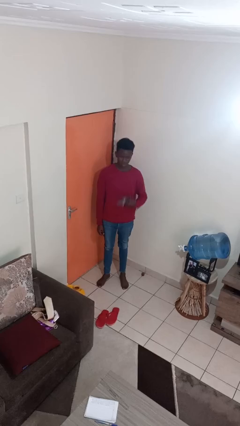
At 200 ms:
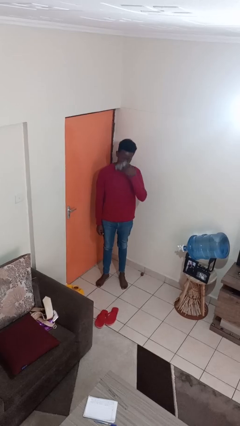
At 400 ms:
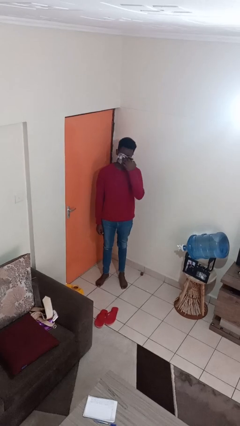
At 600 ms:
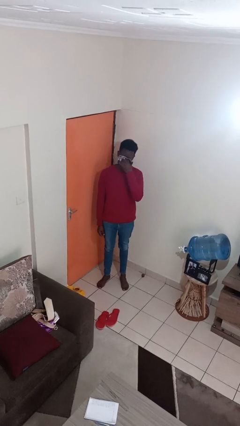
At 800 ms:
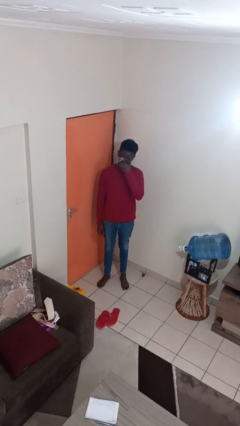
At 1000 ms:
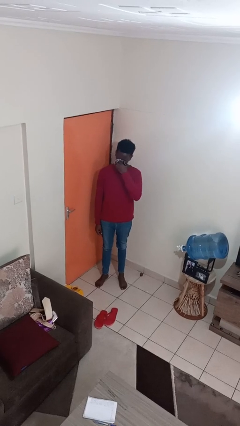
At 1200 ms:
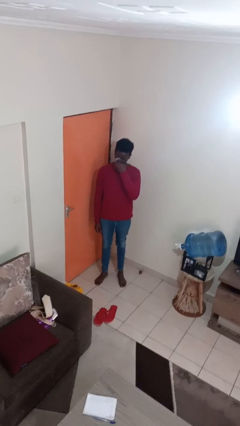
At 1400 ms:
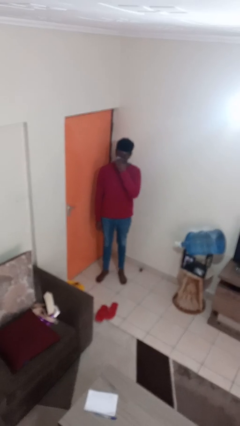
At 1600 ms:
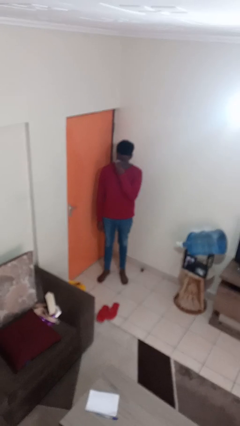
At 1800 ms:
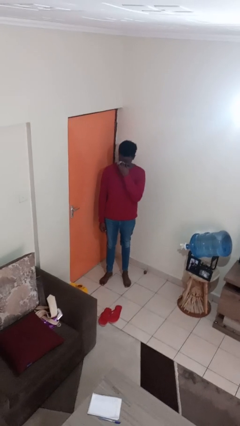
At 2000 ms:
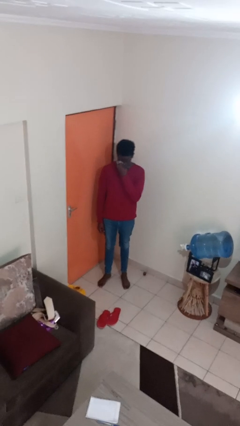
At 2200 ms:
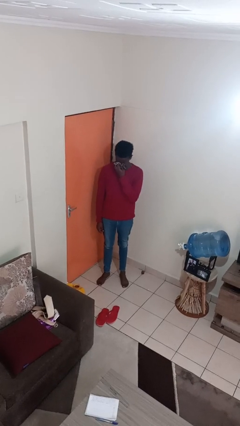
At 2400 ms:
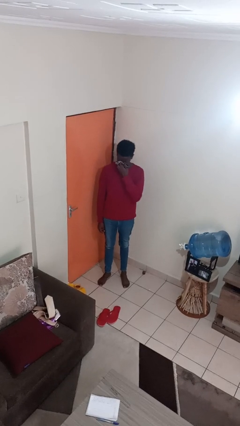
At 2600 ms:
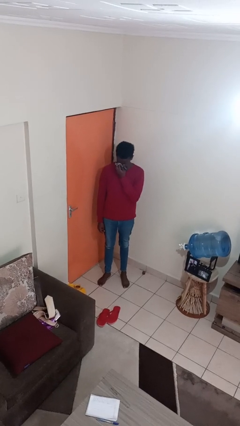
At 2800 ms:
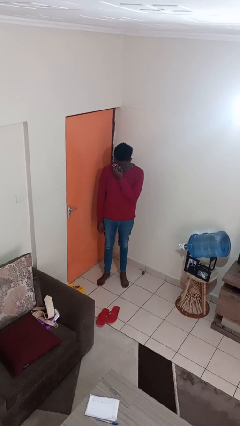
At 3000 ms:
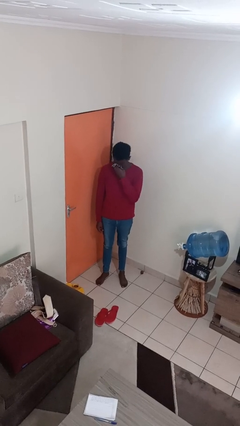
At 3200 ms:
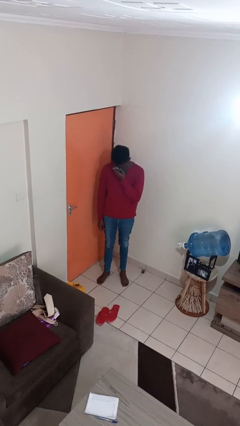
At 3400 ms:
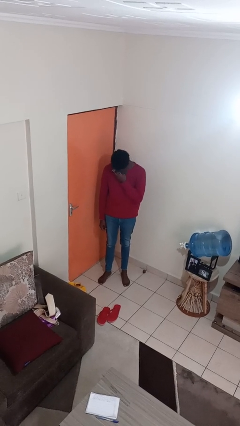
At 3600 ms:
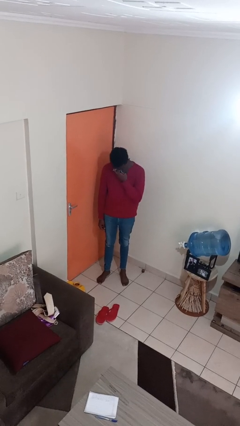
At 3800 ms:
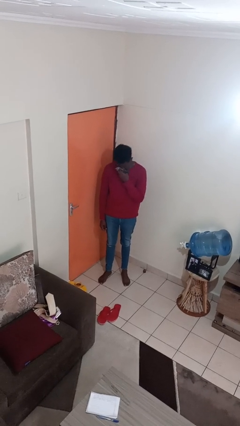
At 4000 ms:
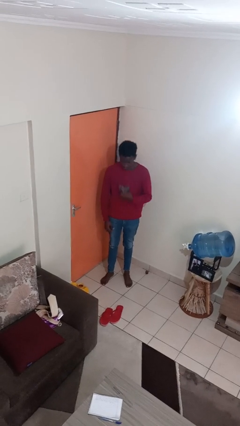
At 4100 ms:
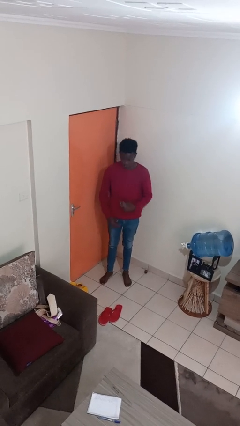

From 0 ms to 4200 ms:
person blows nose

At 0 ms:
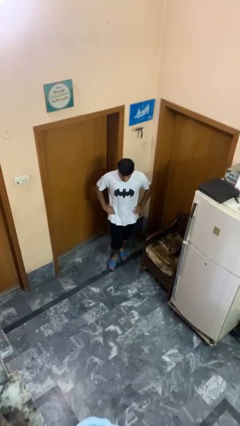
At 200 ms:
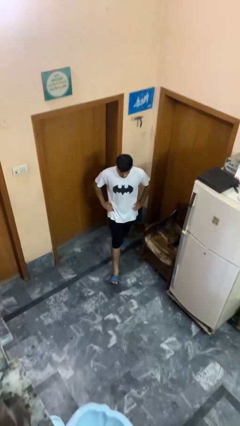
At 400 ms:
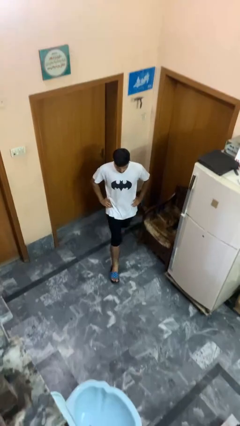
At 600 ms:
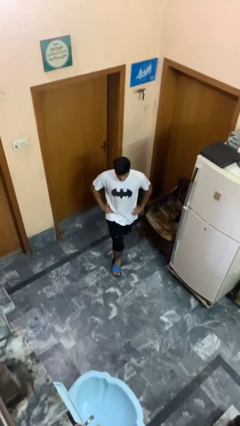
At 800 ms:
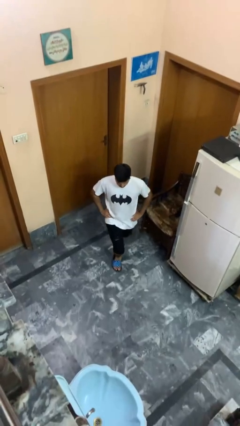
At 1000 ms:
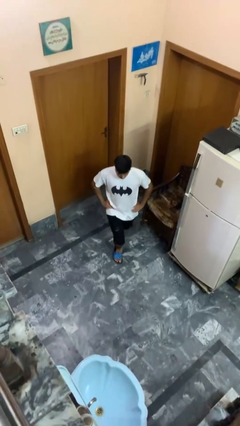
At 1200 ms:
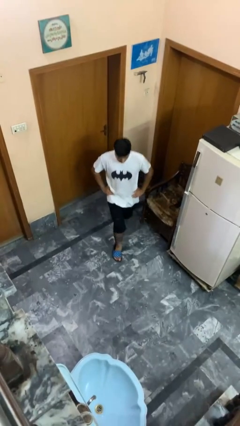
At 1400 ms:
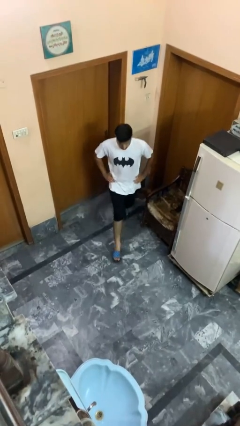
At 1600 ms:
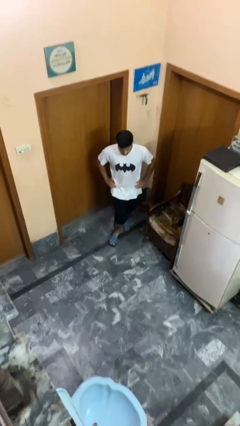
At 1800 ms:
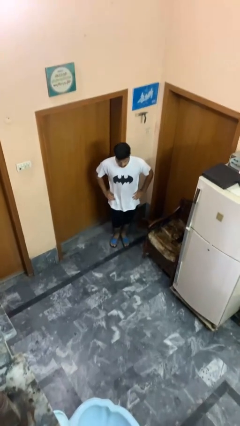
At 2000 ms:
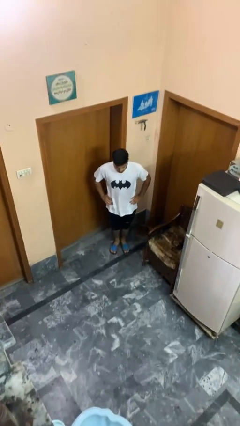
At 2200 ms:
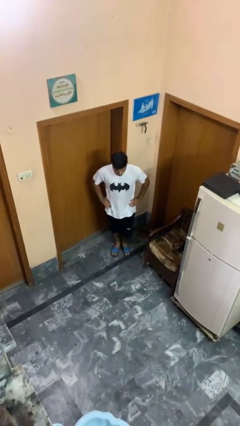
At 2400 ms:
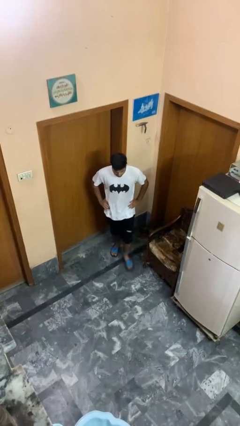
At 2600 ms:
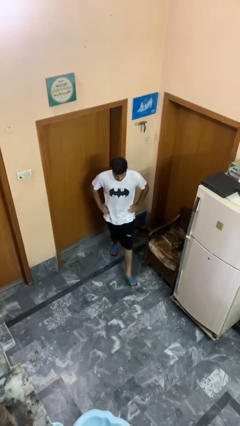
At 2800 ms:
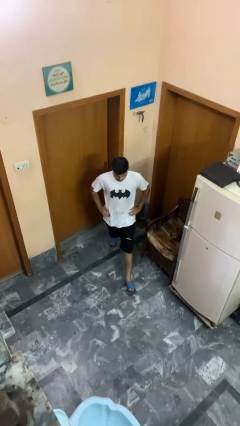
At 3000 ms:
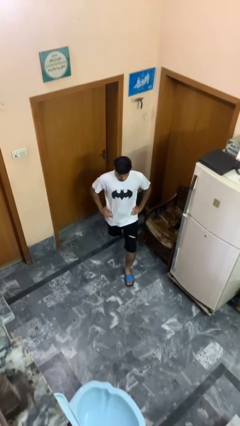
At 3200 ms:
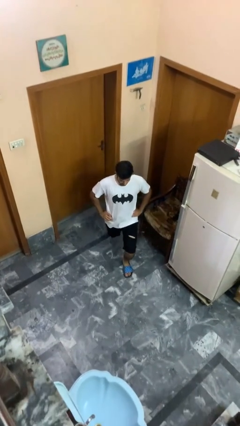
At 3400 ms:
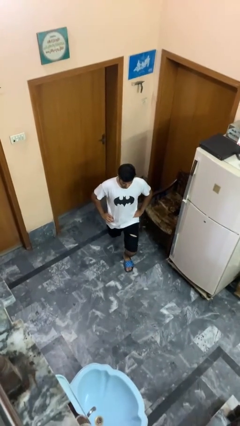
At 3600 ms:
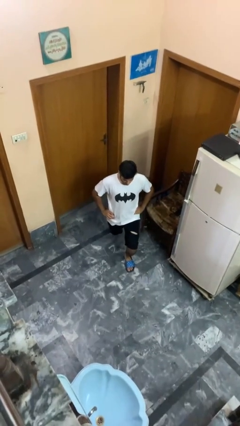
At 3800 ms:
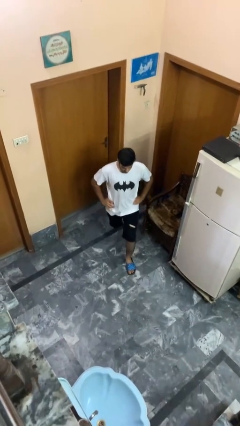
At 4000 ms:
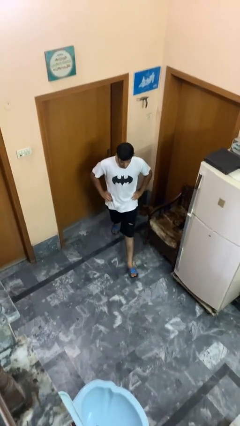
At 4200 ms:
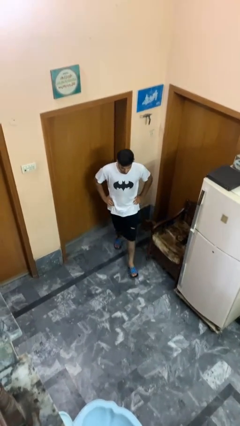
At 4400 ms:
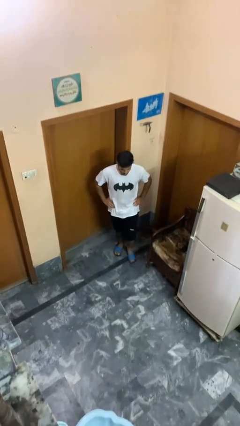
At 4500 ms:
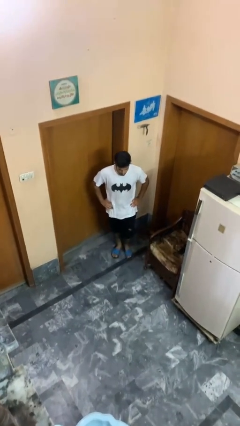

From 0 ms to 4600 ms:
person exercises with lunges

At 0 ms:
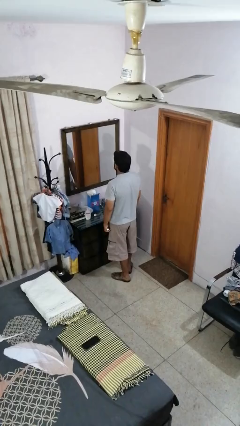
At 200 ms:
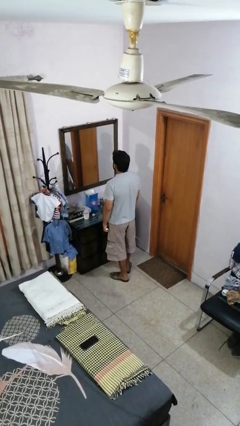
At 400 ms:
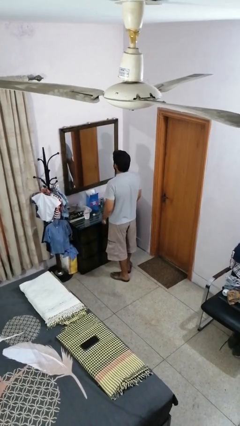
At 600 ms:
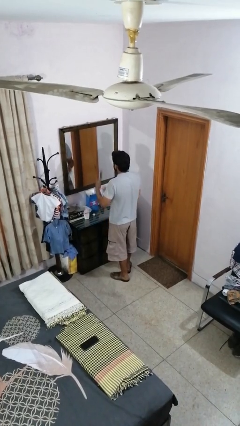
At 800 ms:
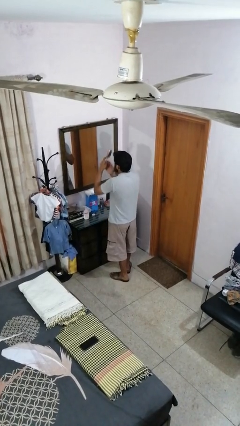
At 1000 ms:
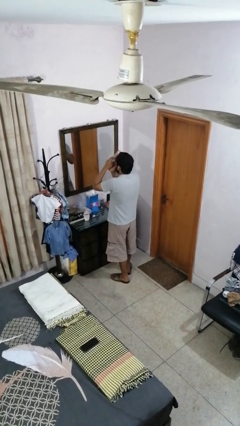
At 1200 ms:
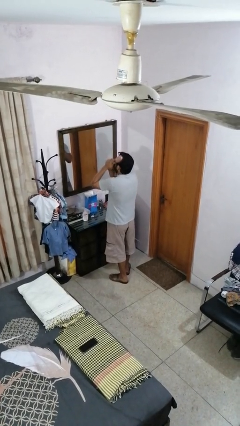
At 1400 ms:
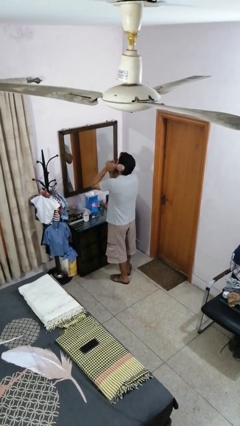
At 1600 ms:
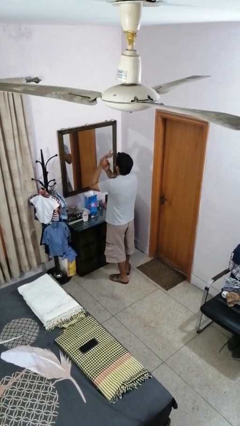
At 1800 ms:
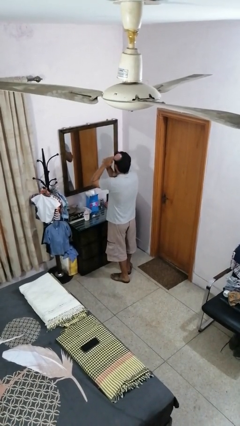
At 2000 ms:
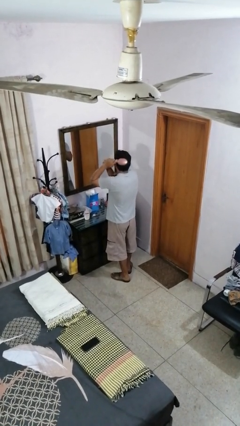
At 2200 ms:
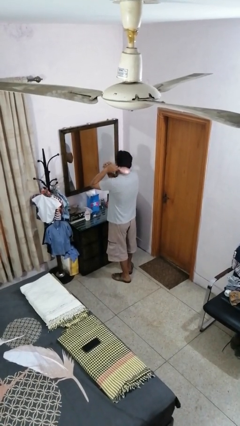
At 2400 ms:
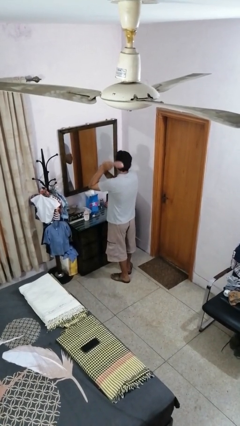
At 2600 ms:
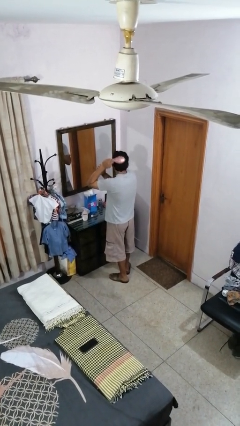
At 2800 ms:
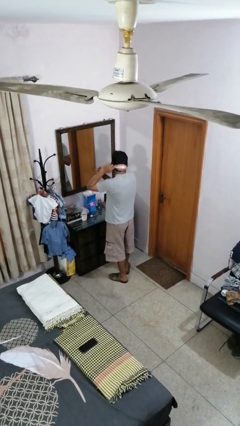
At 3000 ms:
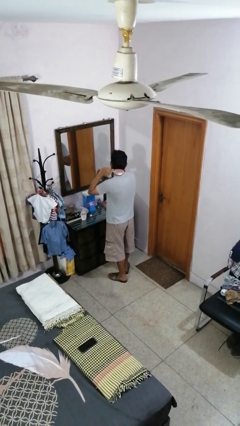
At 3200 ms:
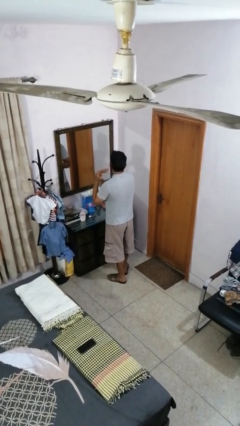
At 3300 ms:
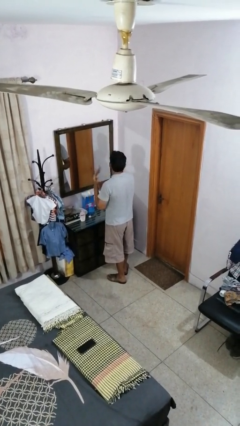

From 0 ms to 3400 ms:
person brushes hair

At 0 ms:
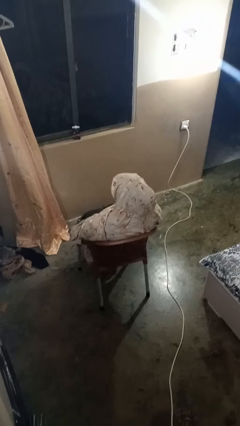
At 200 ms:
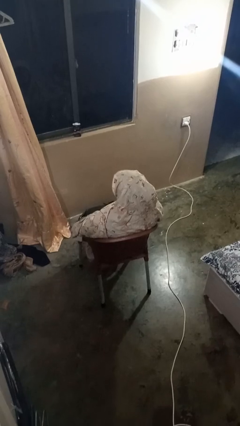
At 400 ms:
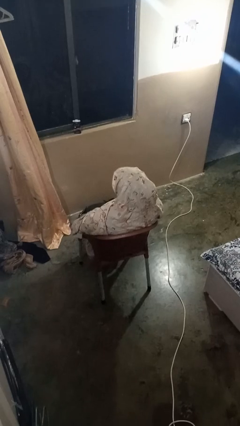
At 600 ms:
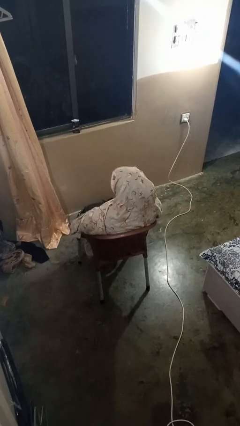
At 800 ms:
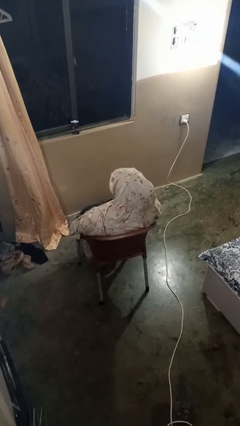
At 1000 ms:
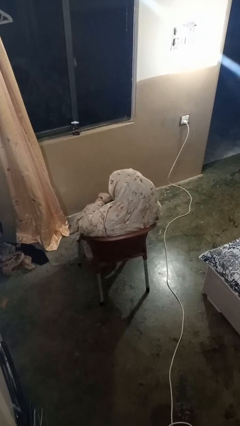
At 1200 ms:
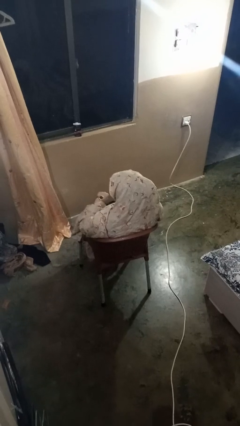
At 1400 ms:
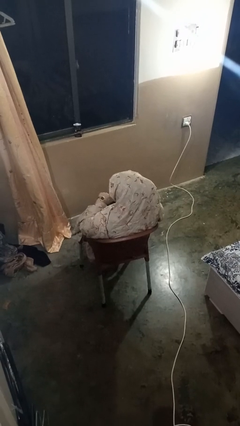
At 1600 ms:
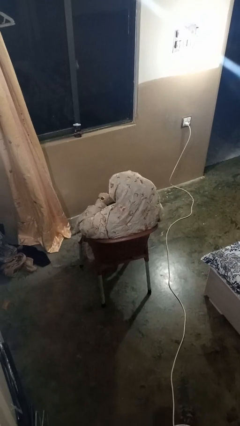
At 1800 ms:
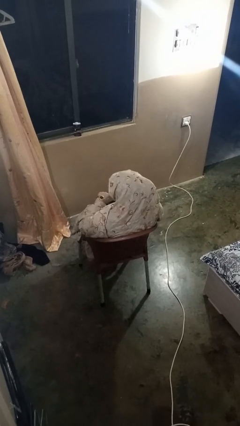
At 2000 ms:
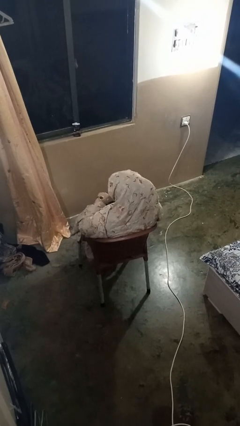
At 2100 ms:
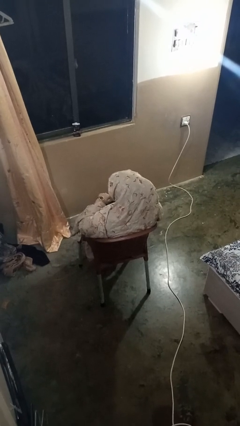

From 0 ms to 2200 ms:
person looks at wristwatch

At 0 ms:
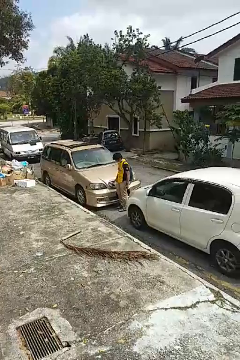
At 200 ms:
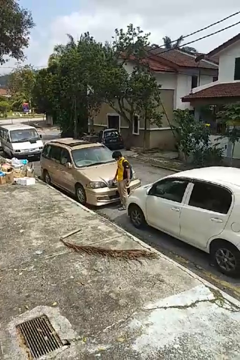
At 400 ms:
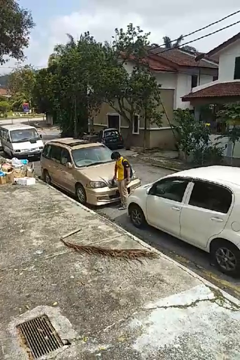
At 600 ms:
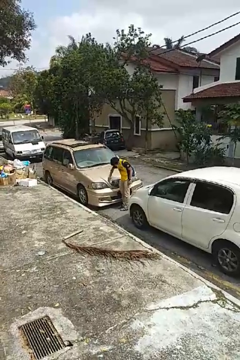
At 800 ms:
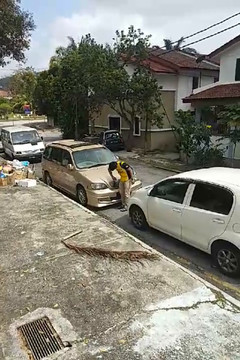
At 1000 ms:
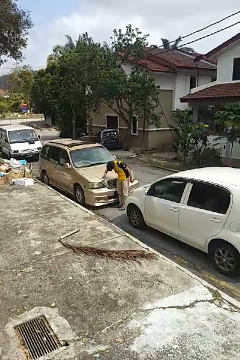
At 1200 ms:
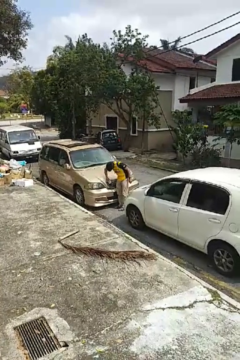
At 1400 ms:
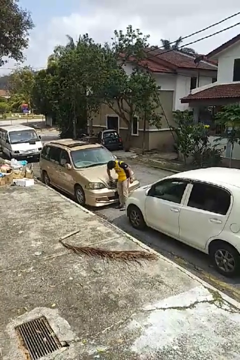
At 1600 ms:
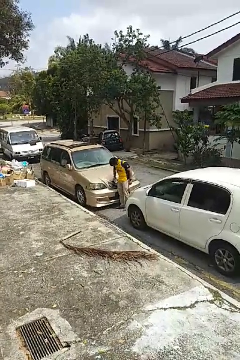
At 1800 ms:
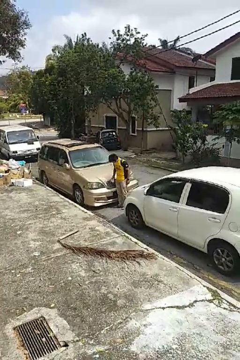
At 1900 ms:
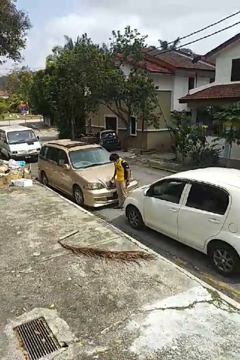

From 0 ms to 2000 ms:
person polishes car with rag

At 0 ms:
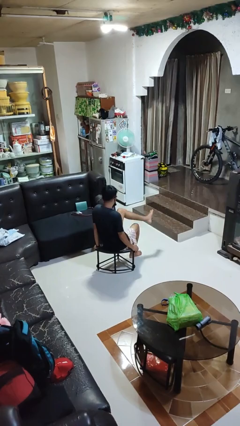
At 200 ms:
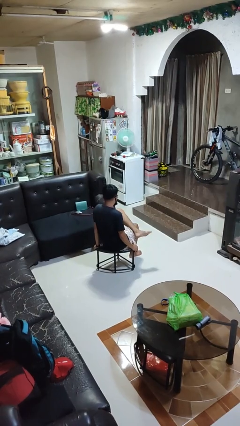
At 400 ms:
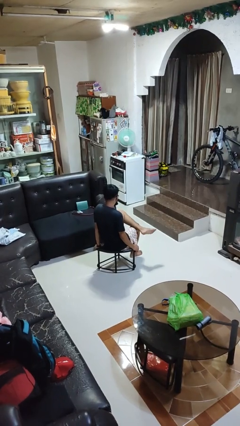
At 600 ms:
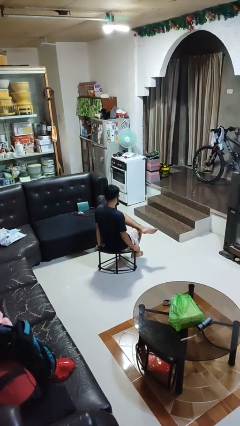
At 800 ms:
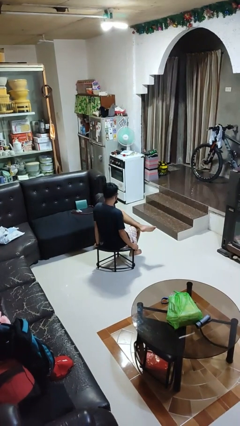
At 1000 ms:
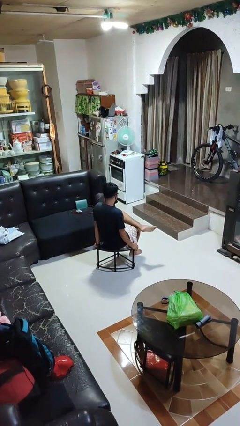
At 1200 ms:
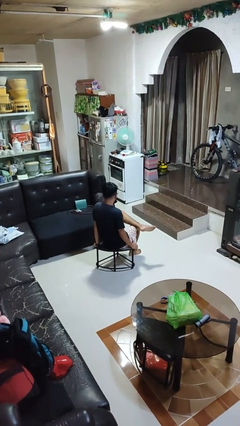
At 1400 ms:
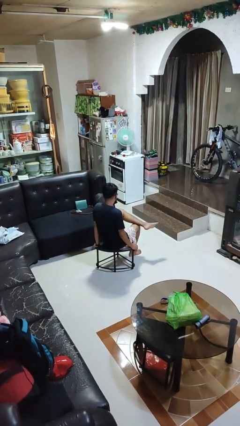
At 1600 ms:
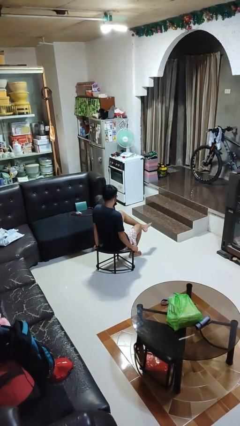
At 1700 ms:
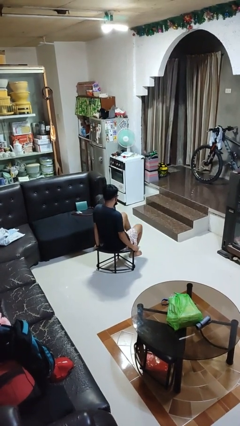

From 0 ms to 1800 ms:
person crosses legs
